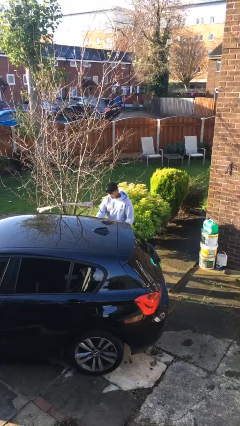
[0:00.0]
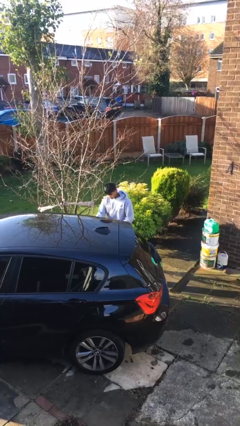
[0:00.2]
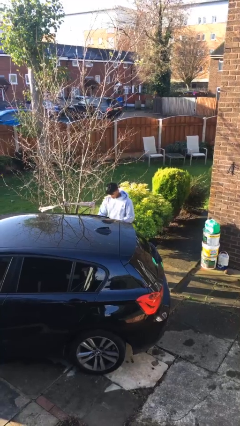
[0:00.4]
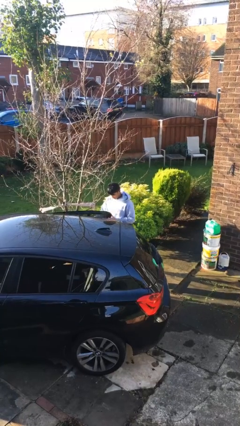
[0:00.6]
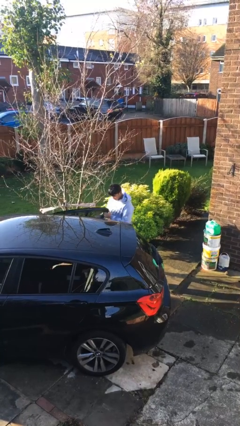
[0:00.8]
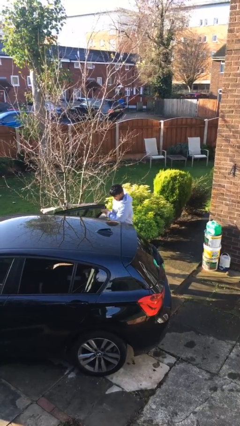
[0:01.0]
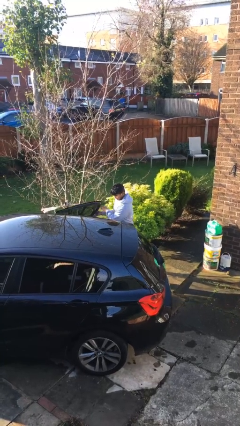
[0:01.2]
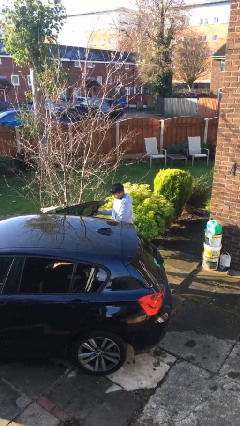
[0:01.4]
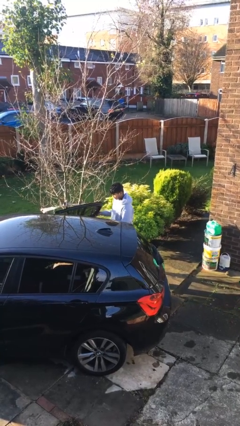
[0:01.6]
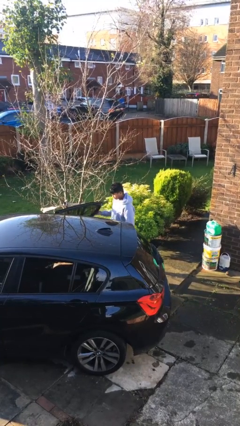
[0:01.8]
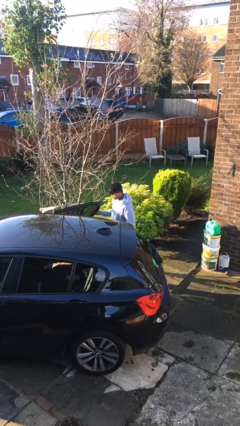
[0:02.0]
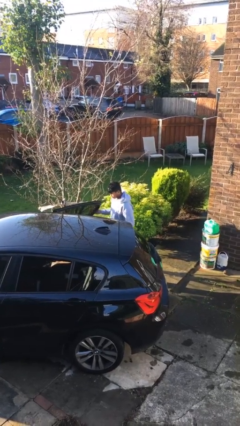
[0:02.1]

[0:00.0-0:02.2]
person opens car door

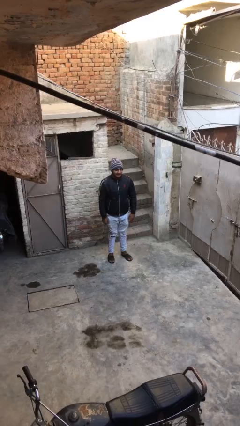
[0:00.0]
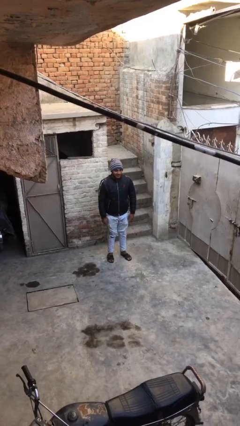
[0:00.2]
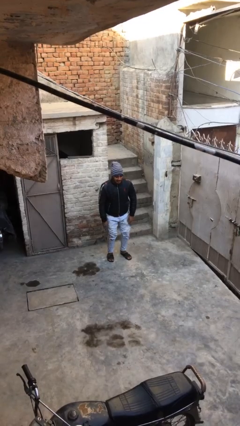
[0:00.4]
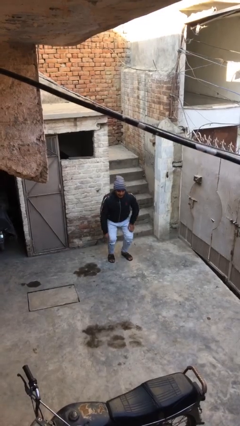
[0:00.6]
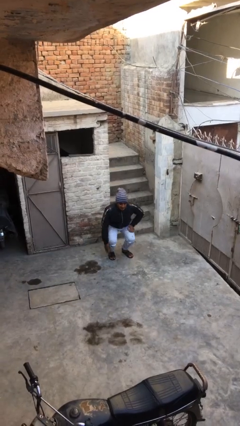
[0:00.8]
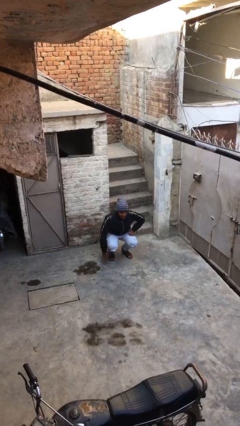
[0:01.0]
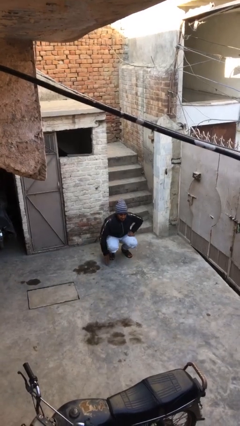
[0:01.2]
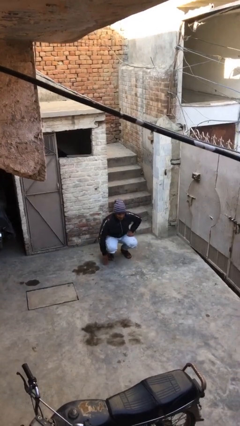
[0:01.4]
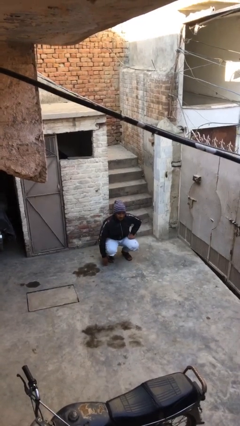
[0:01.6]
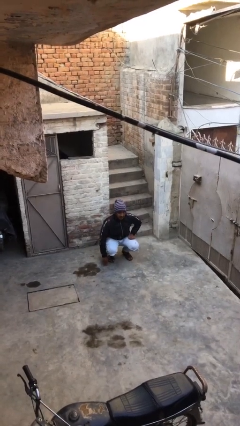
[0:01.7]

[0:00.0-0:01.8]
person sits down

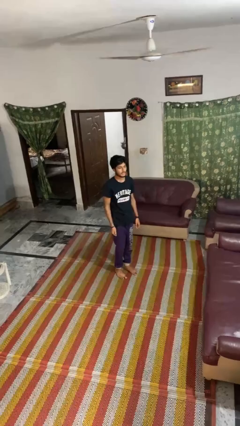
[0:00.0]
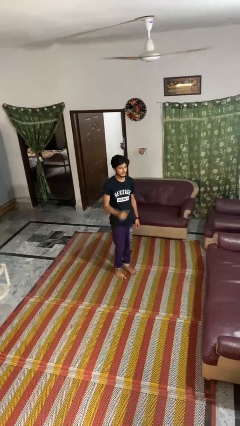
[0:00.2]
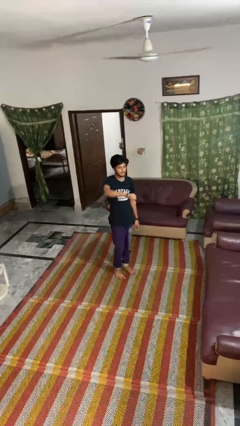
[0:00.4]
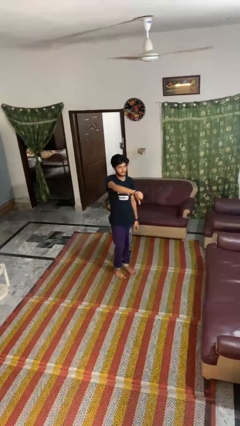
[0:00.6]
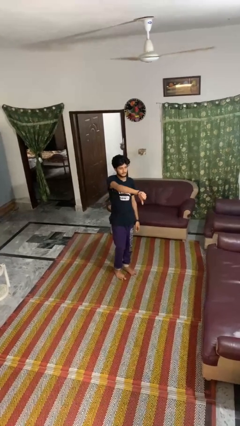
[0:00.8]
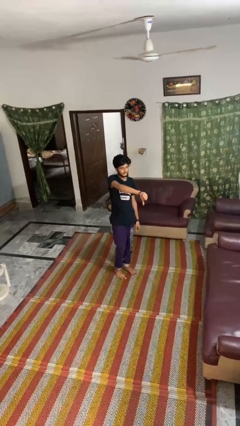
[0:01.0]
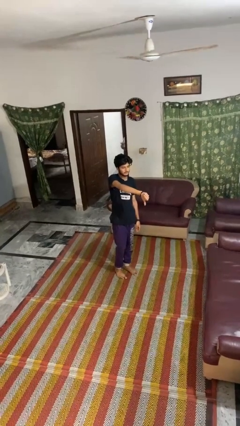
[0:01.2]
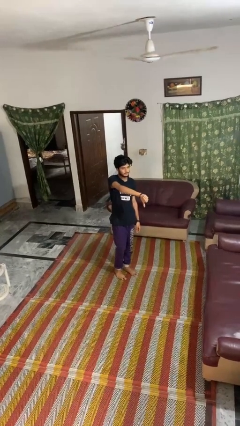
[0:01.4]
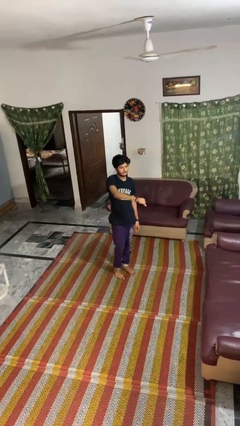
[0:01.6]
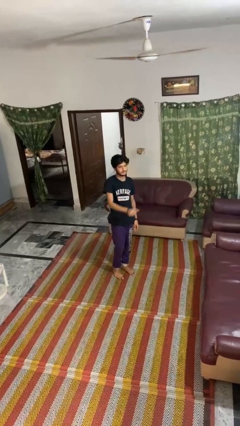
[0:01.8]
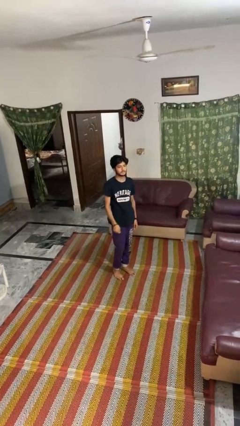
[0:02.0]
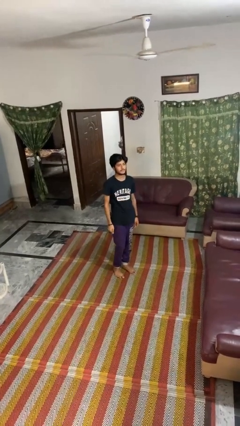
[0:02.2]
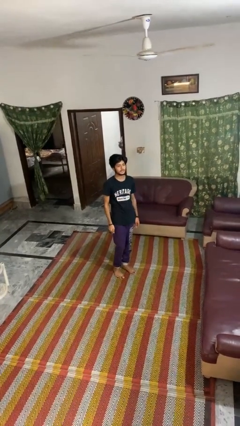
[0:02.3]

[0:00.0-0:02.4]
person gestures thumbs down

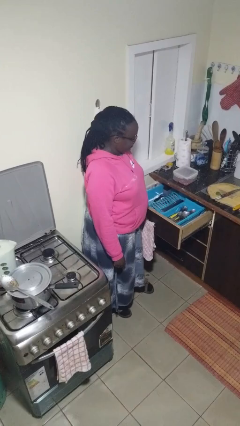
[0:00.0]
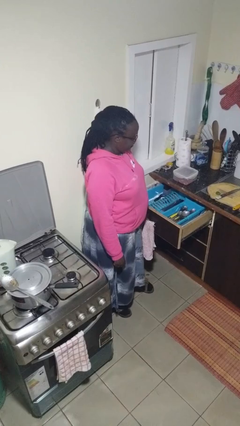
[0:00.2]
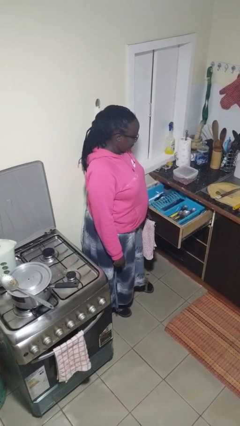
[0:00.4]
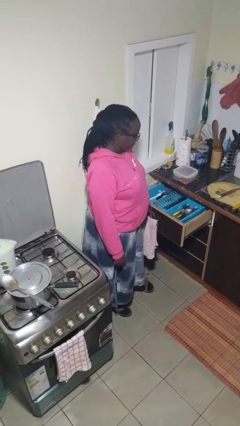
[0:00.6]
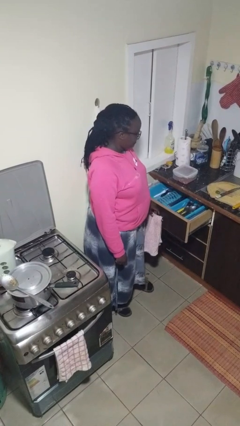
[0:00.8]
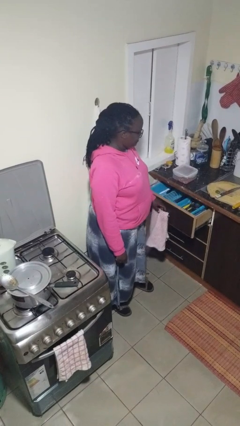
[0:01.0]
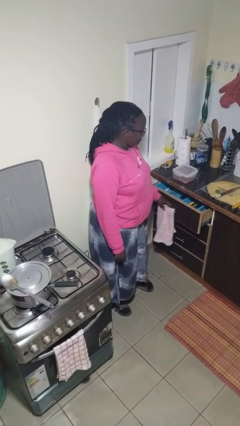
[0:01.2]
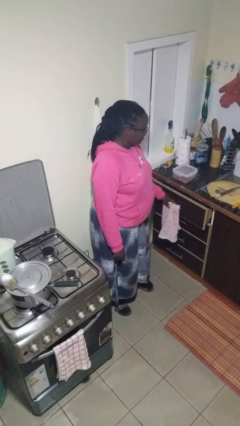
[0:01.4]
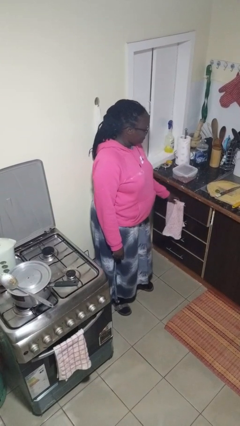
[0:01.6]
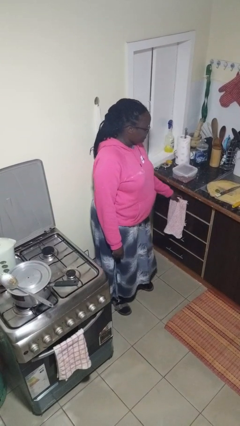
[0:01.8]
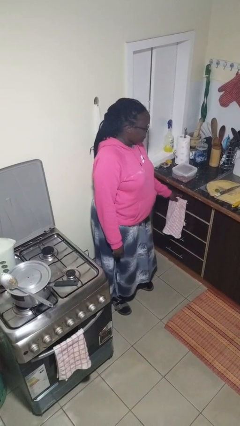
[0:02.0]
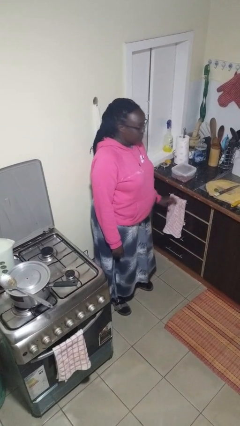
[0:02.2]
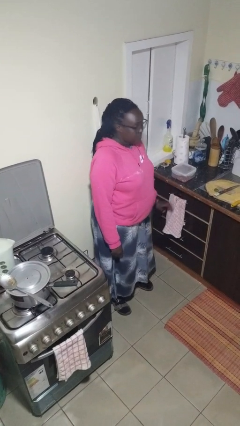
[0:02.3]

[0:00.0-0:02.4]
person closes kitchen drawer

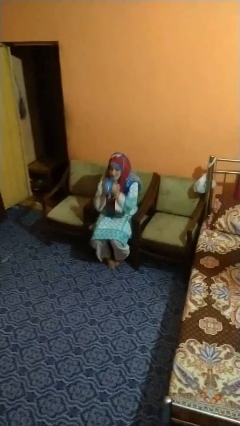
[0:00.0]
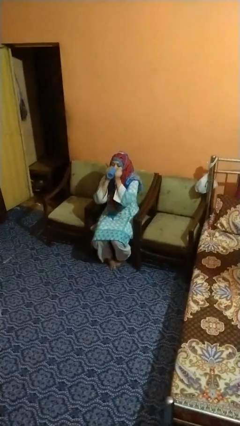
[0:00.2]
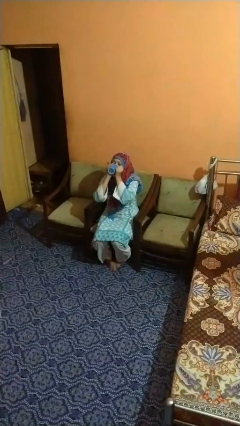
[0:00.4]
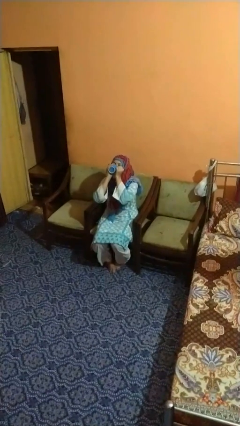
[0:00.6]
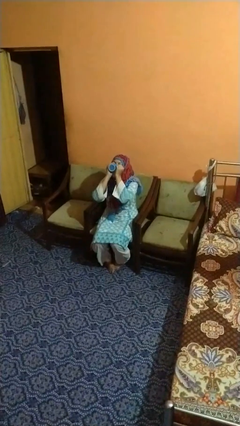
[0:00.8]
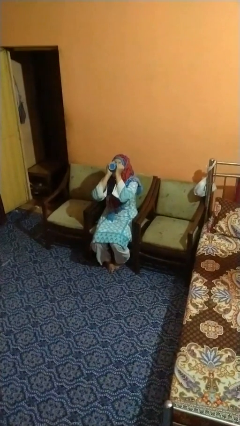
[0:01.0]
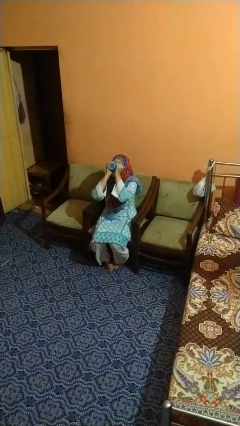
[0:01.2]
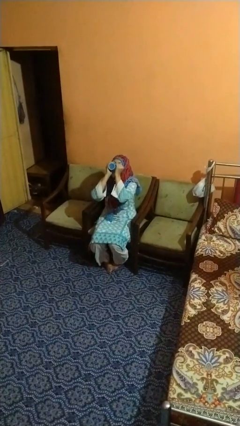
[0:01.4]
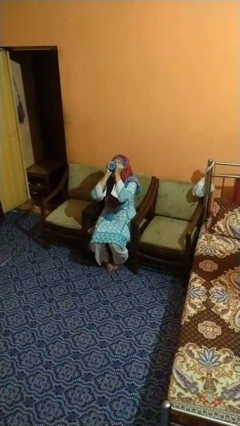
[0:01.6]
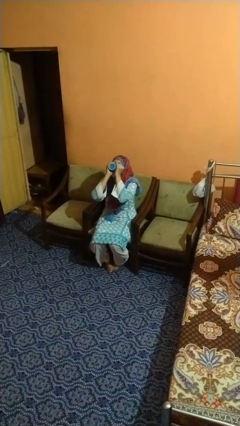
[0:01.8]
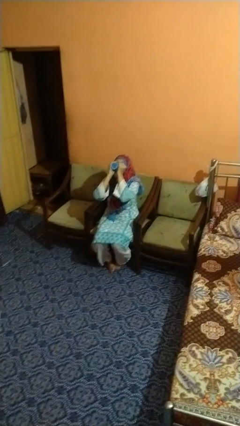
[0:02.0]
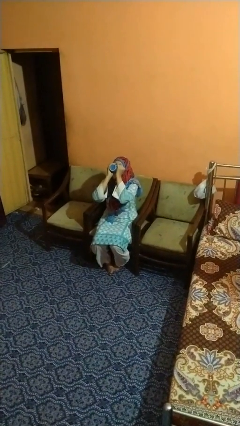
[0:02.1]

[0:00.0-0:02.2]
person drinks from mug

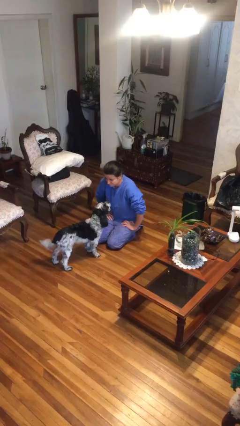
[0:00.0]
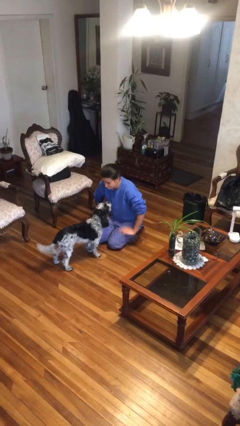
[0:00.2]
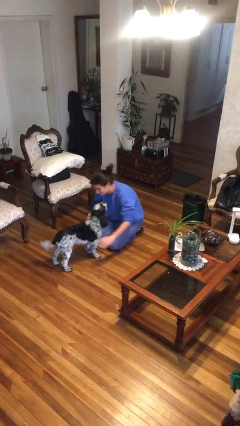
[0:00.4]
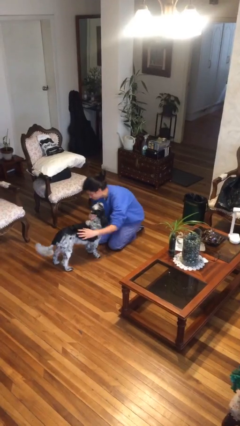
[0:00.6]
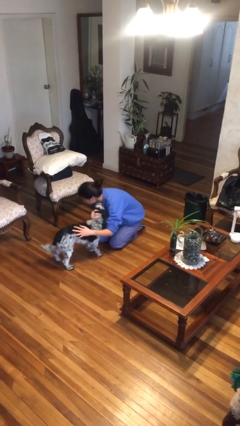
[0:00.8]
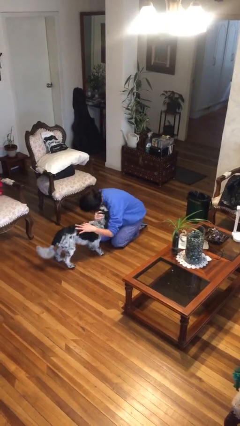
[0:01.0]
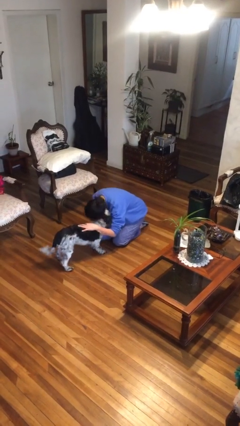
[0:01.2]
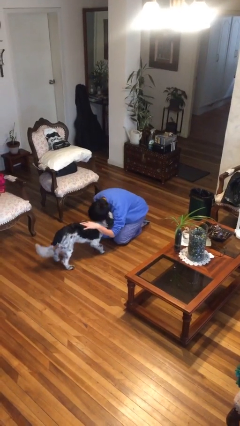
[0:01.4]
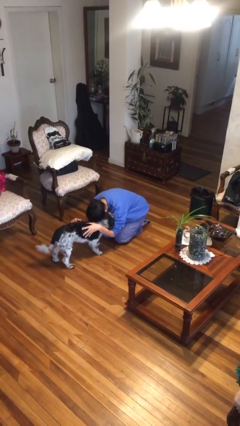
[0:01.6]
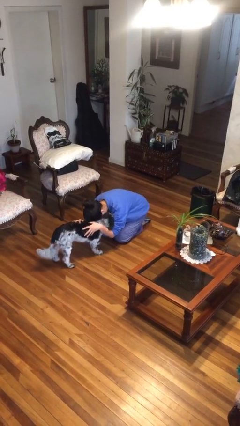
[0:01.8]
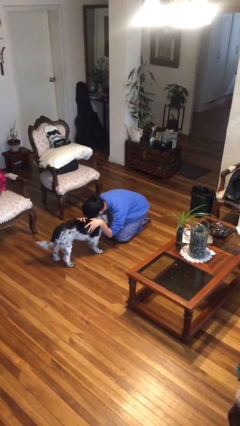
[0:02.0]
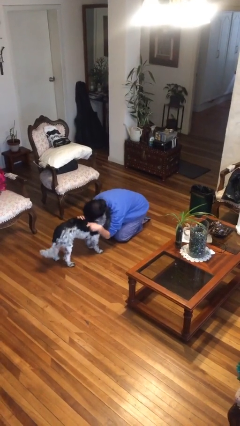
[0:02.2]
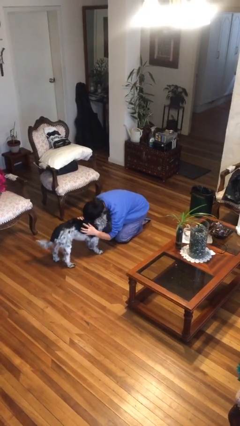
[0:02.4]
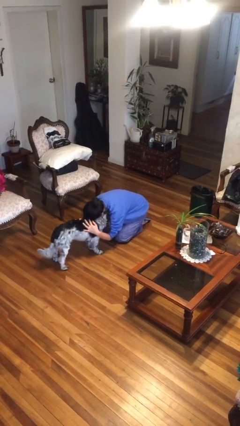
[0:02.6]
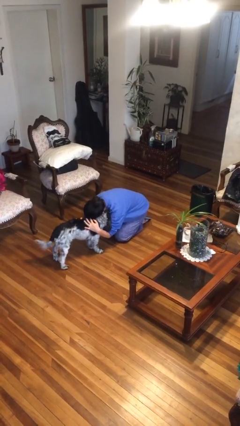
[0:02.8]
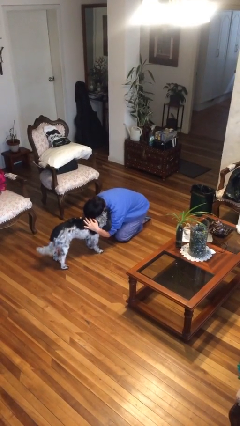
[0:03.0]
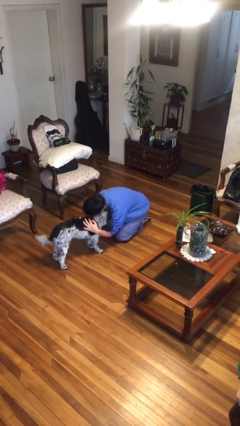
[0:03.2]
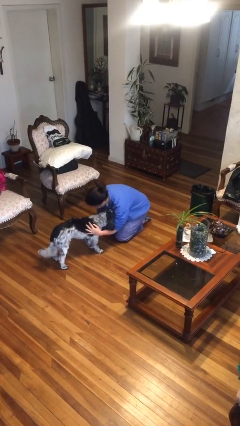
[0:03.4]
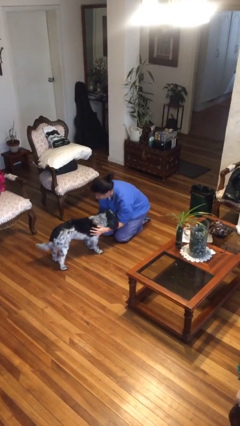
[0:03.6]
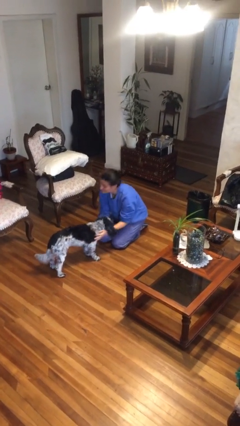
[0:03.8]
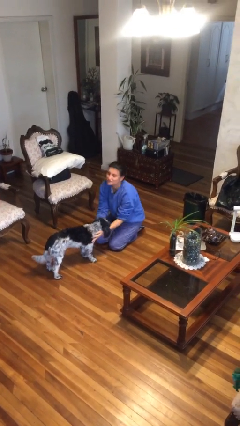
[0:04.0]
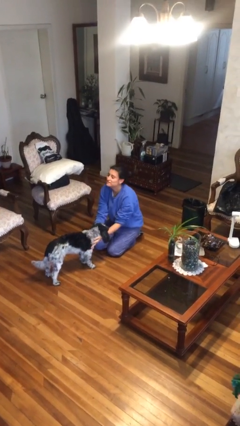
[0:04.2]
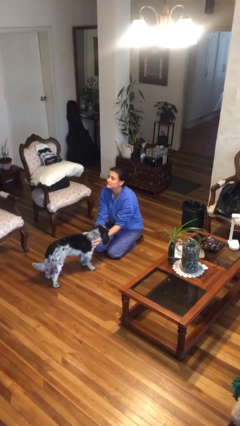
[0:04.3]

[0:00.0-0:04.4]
person hugs dog

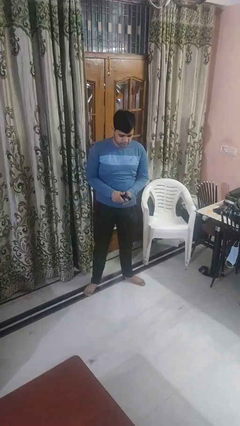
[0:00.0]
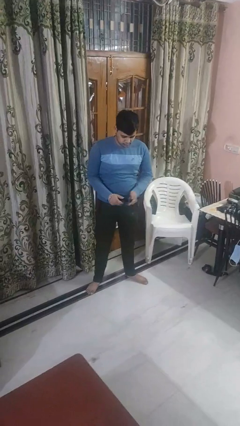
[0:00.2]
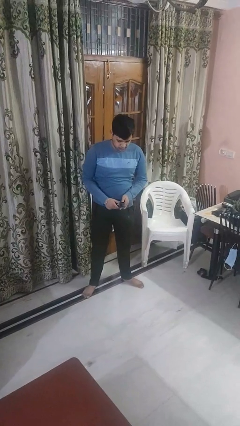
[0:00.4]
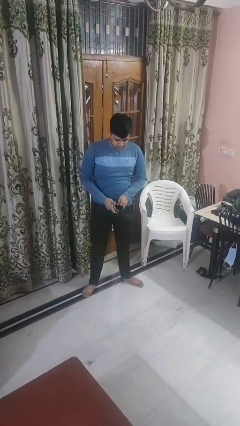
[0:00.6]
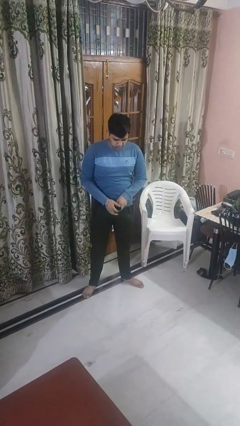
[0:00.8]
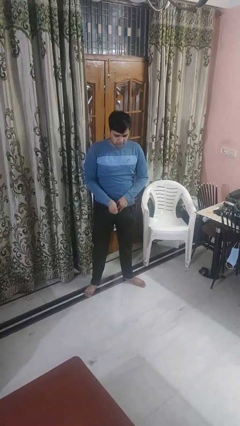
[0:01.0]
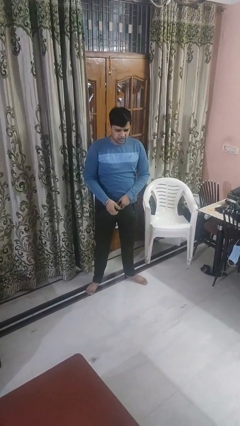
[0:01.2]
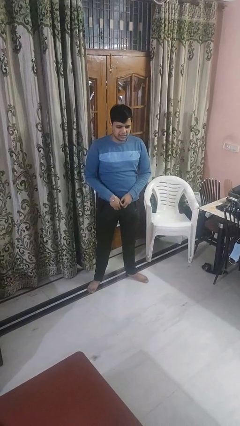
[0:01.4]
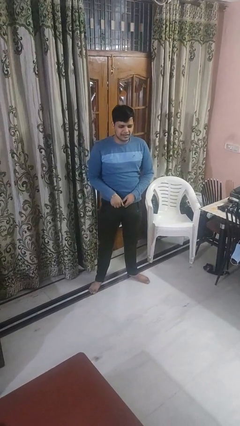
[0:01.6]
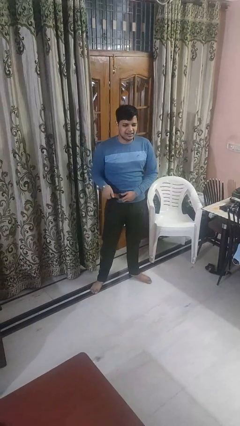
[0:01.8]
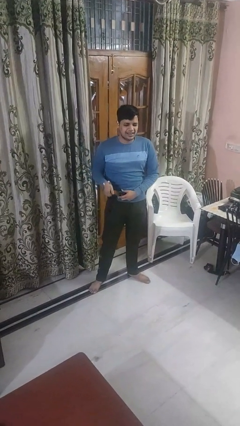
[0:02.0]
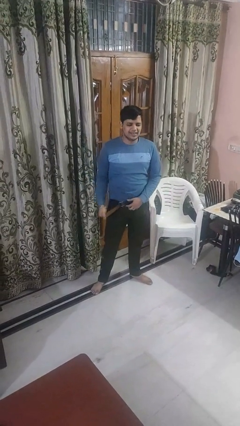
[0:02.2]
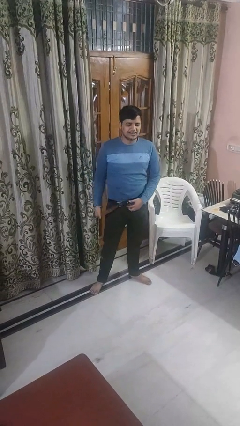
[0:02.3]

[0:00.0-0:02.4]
person puts on belt
